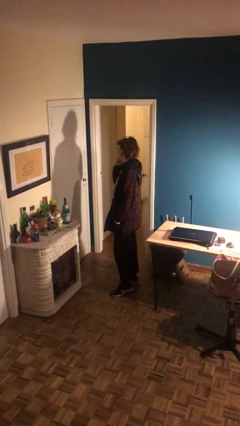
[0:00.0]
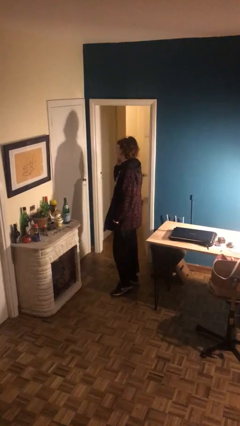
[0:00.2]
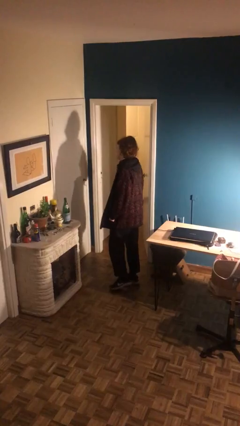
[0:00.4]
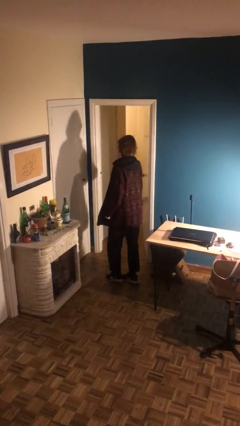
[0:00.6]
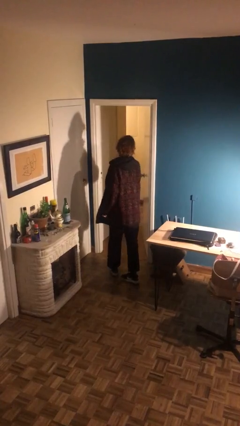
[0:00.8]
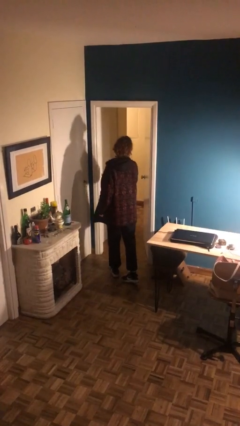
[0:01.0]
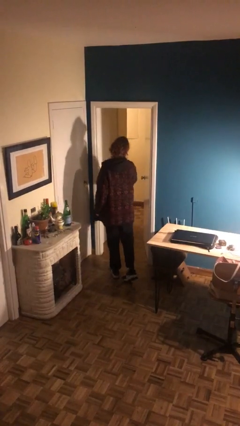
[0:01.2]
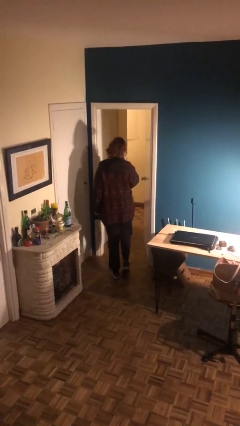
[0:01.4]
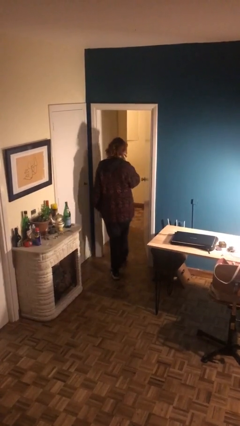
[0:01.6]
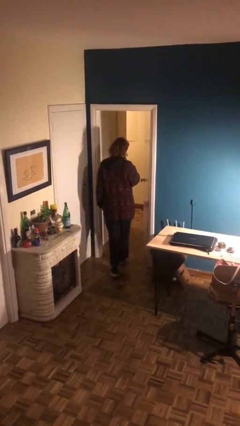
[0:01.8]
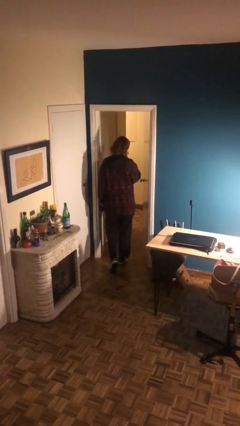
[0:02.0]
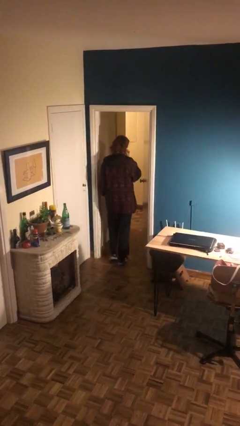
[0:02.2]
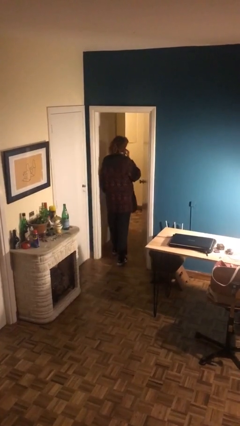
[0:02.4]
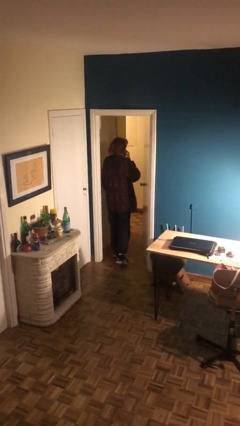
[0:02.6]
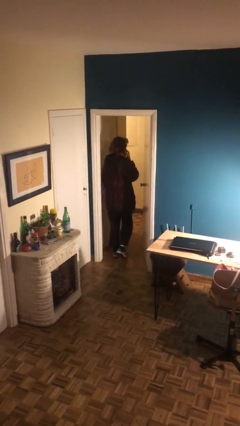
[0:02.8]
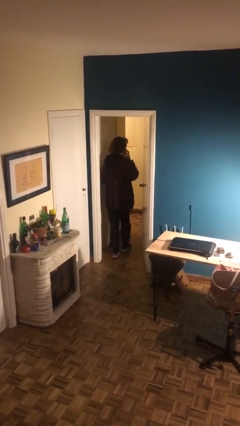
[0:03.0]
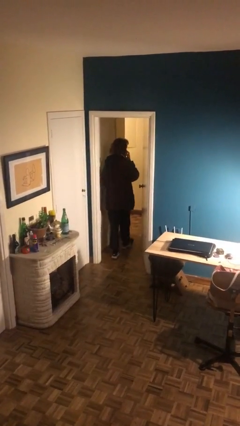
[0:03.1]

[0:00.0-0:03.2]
person exits scene through structure

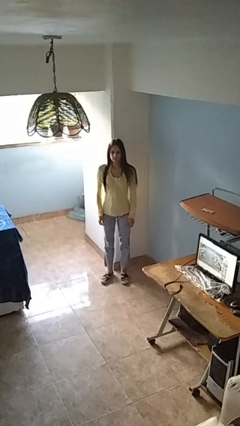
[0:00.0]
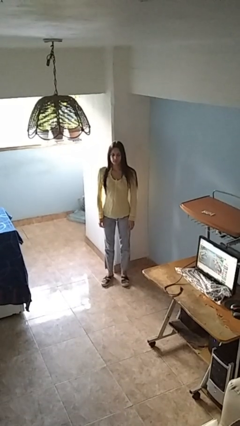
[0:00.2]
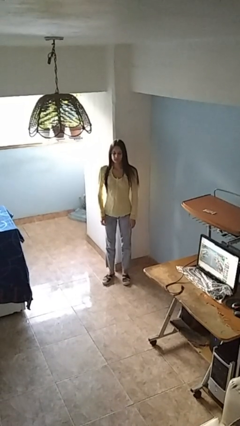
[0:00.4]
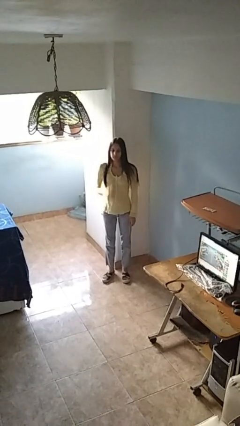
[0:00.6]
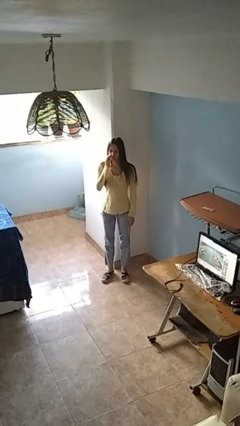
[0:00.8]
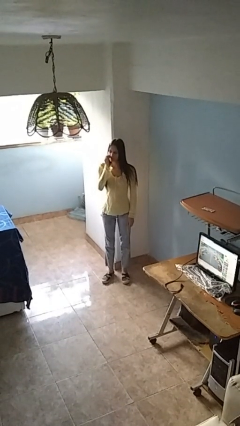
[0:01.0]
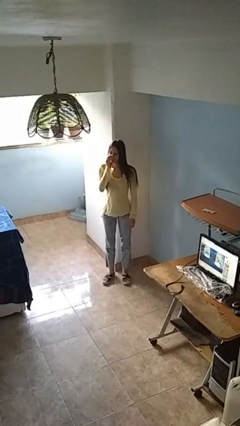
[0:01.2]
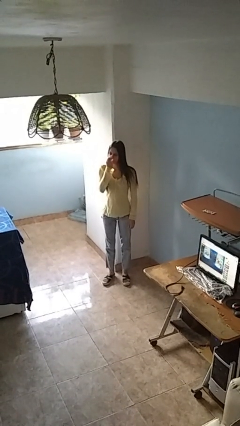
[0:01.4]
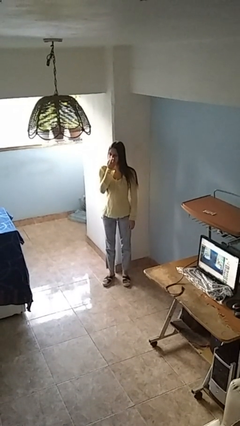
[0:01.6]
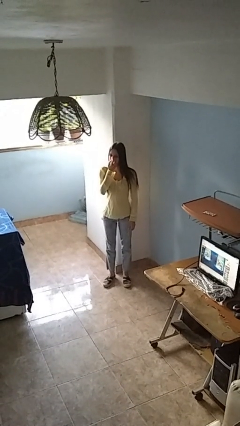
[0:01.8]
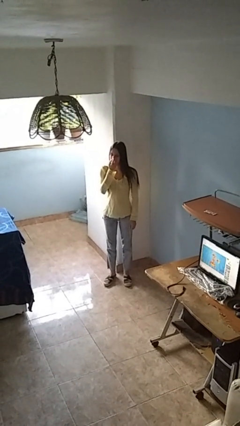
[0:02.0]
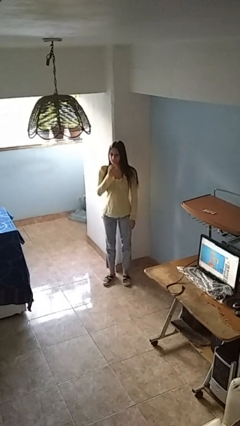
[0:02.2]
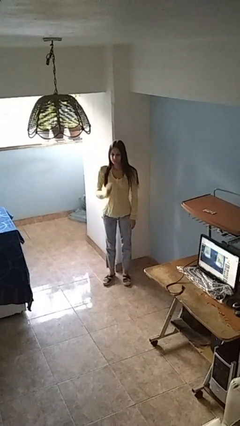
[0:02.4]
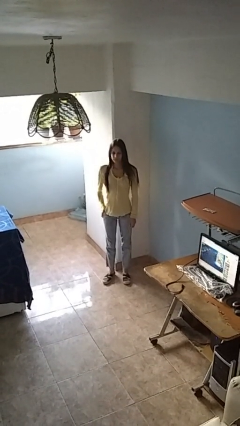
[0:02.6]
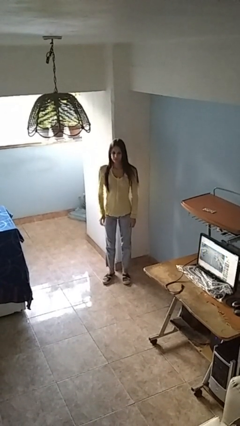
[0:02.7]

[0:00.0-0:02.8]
person scratches face

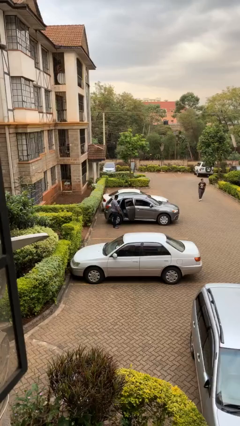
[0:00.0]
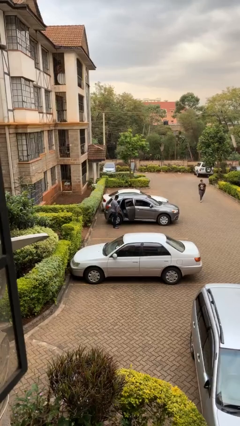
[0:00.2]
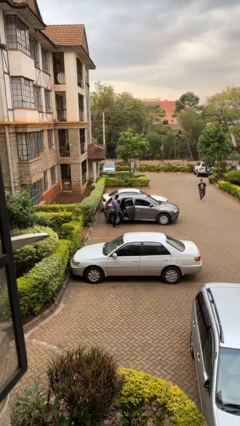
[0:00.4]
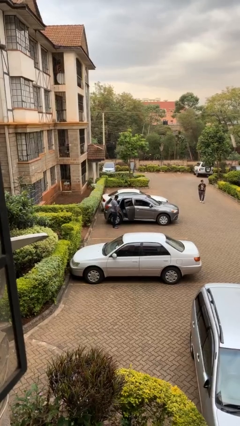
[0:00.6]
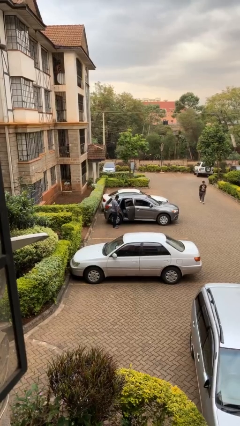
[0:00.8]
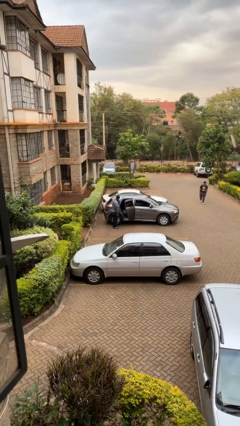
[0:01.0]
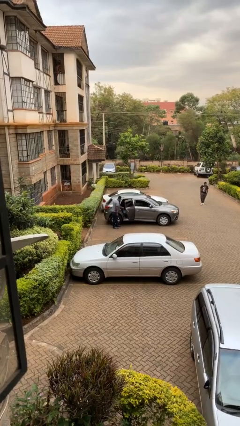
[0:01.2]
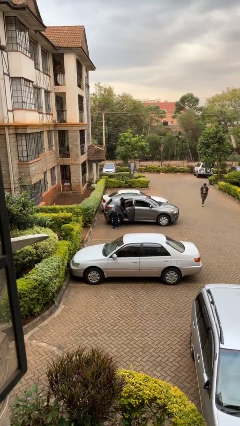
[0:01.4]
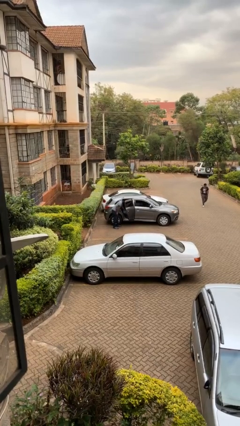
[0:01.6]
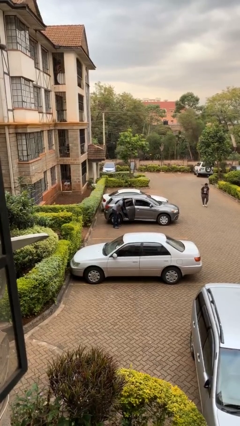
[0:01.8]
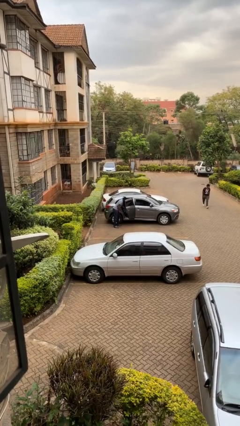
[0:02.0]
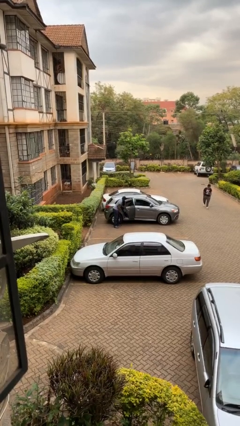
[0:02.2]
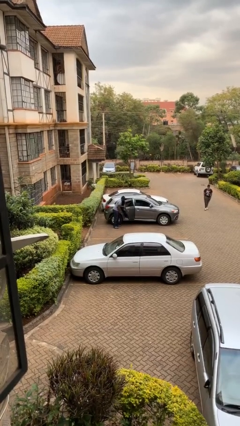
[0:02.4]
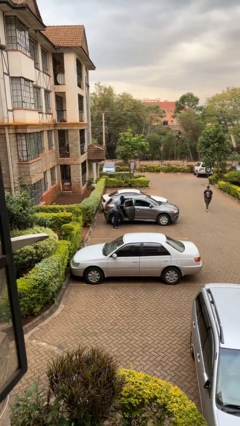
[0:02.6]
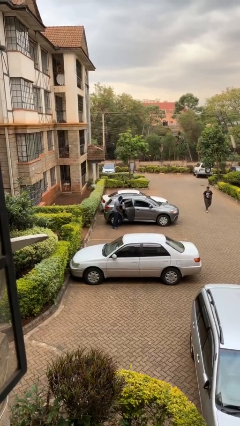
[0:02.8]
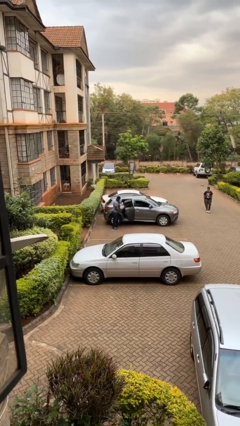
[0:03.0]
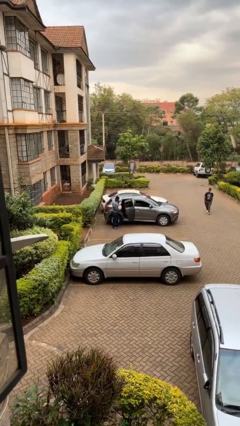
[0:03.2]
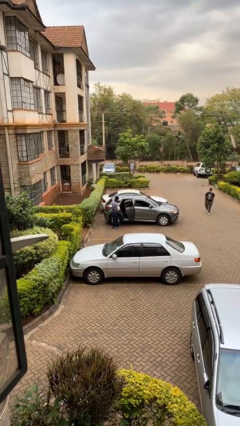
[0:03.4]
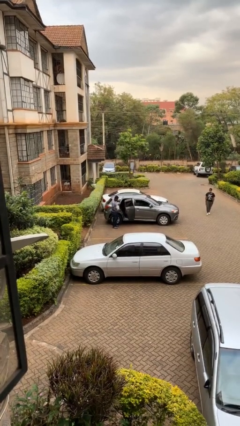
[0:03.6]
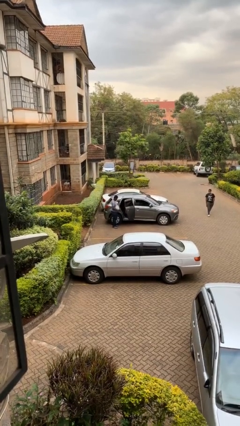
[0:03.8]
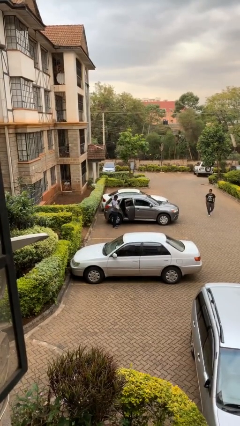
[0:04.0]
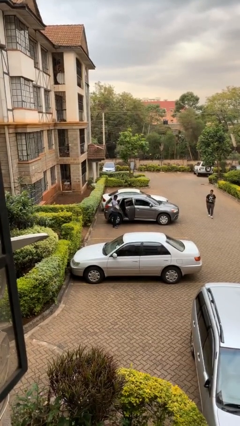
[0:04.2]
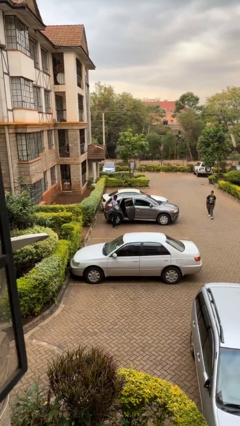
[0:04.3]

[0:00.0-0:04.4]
person unloads car

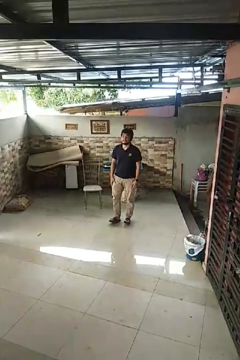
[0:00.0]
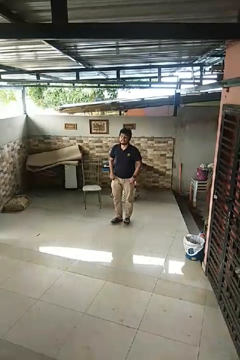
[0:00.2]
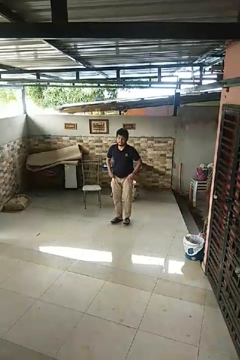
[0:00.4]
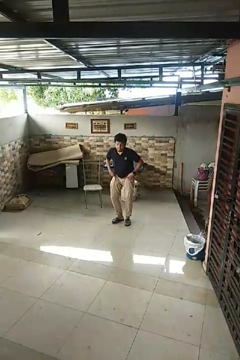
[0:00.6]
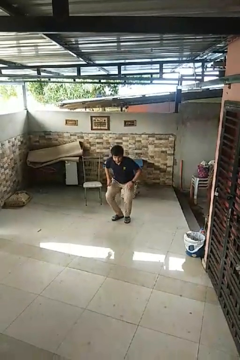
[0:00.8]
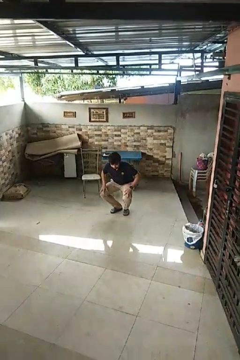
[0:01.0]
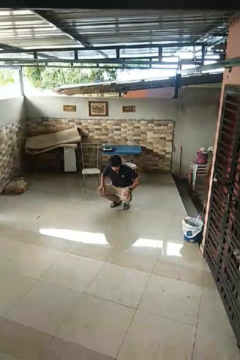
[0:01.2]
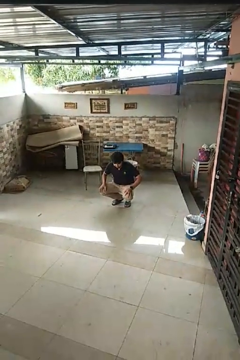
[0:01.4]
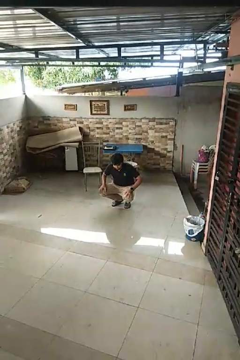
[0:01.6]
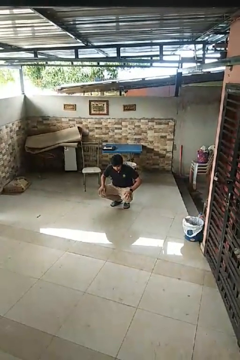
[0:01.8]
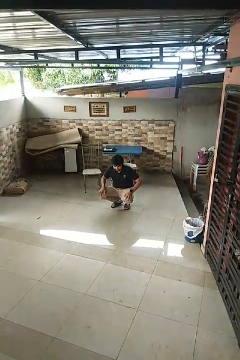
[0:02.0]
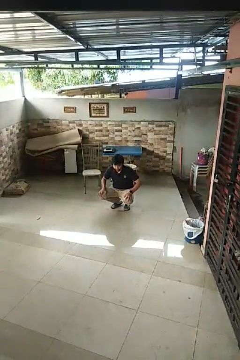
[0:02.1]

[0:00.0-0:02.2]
person squats

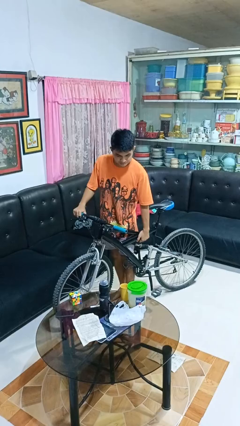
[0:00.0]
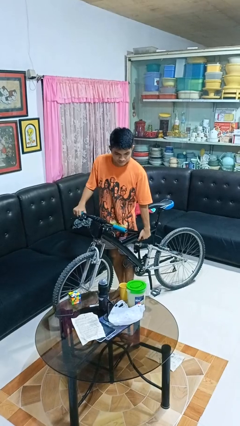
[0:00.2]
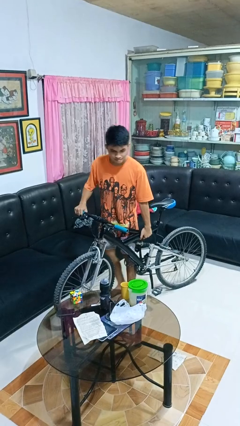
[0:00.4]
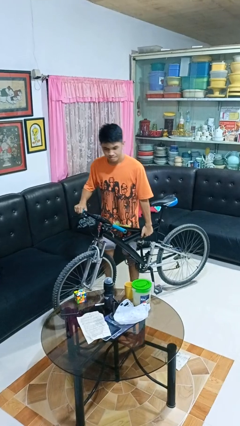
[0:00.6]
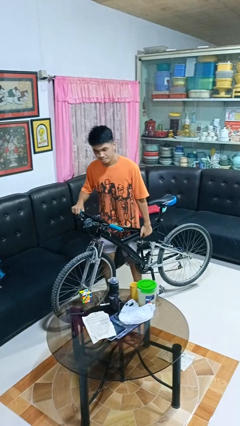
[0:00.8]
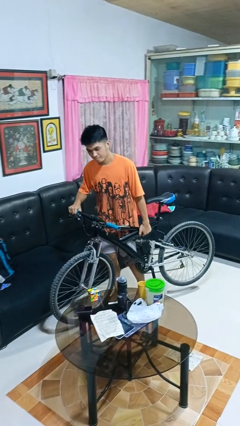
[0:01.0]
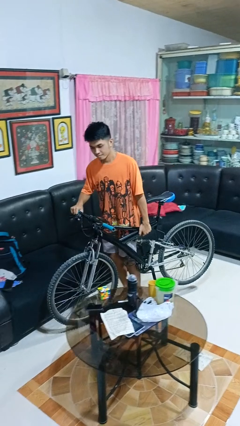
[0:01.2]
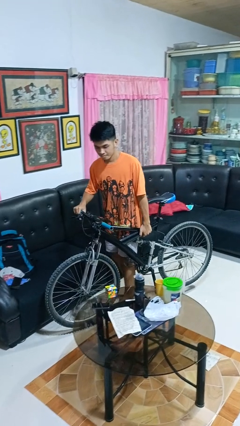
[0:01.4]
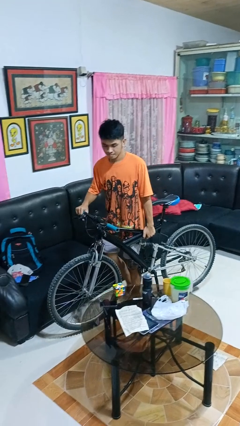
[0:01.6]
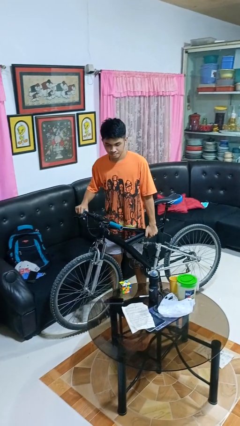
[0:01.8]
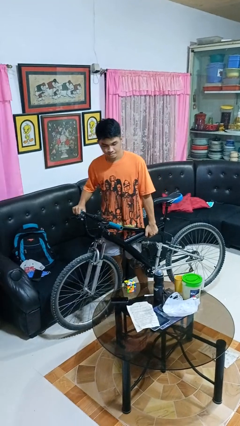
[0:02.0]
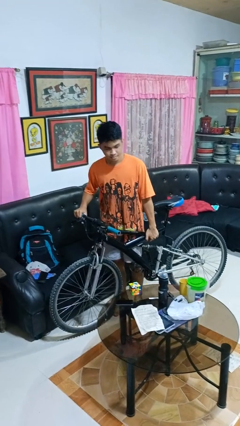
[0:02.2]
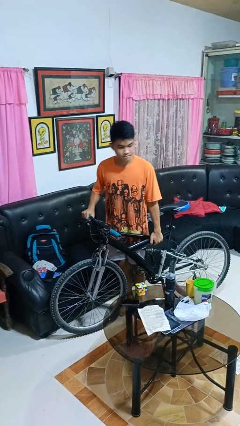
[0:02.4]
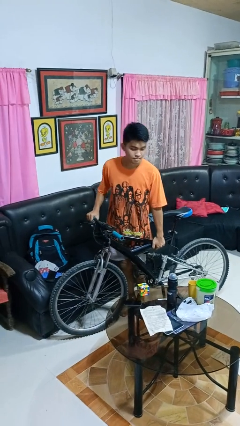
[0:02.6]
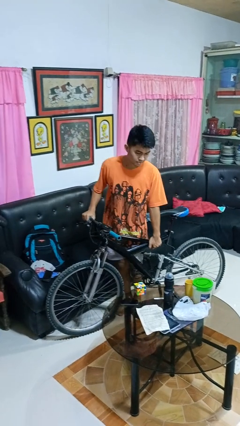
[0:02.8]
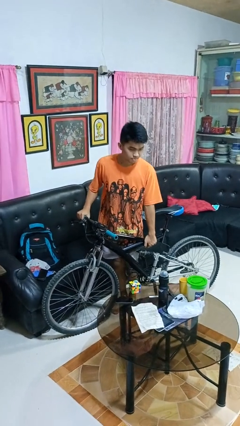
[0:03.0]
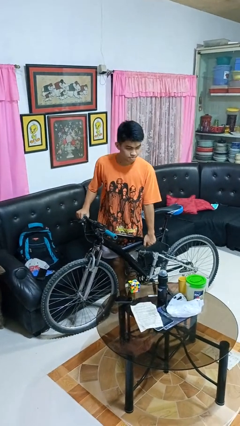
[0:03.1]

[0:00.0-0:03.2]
person carries bicycle

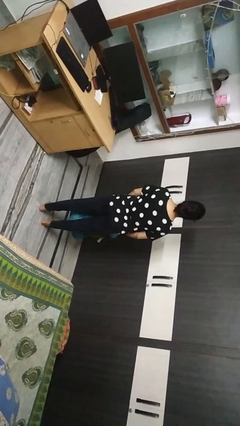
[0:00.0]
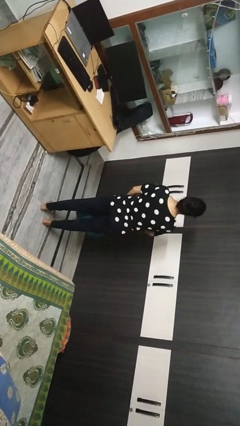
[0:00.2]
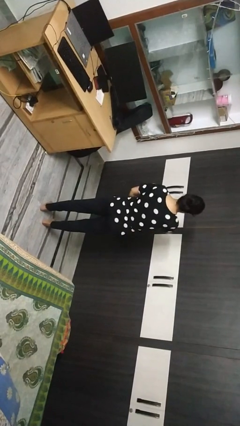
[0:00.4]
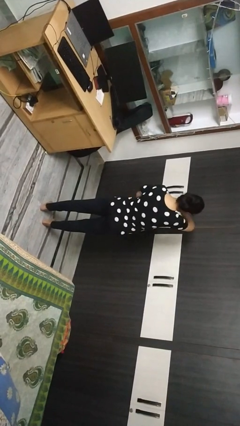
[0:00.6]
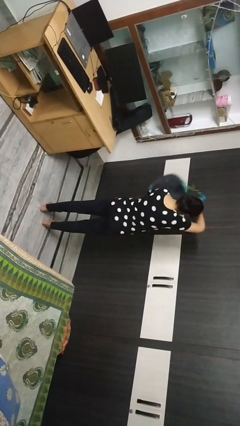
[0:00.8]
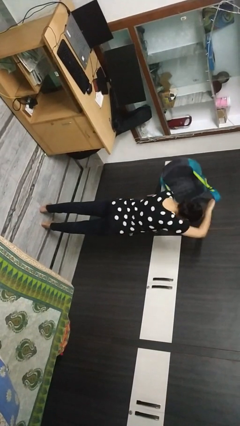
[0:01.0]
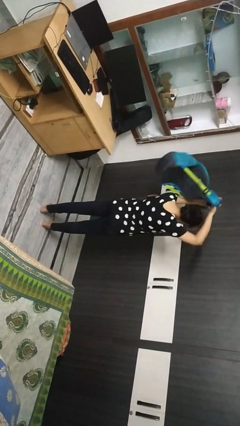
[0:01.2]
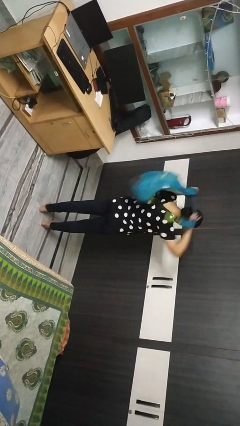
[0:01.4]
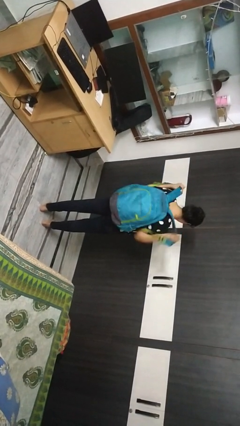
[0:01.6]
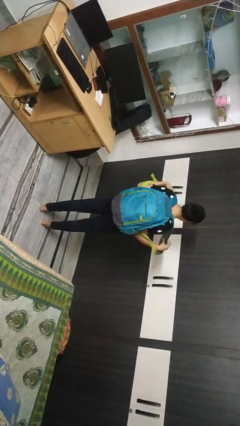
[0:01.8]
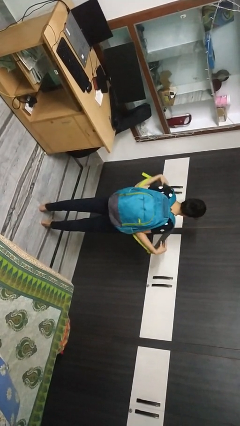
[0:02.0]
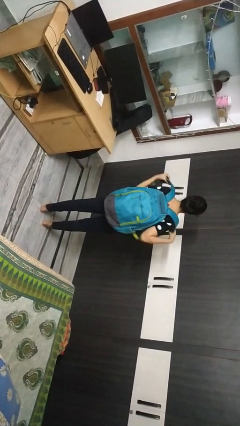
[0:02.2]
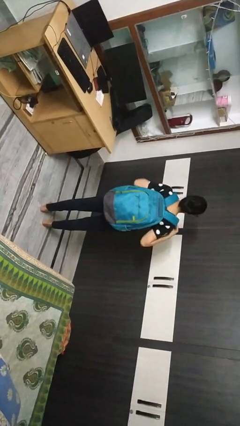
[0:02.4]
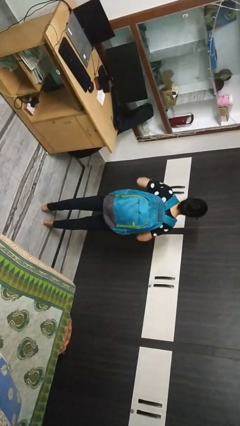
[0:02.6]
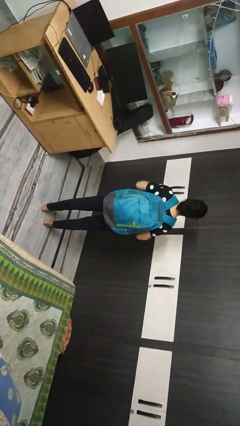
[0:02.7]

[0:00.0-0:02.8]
person puts on backpack
